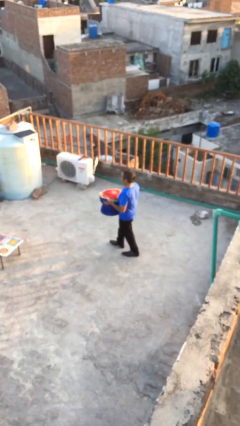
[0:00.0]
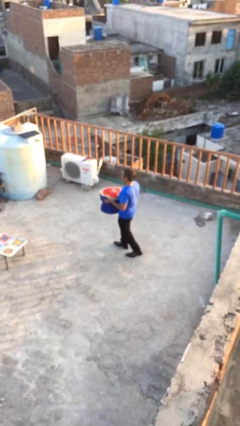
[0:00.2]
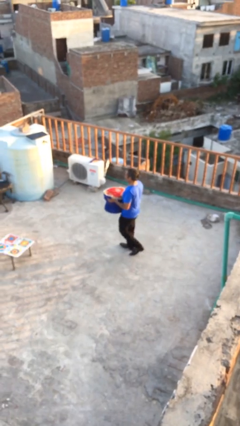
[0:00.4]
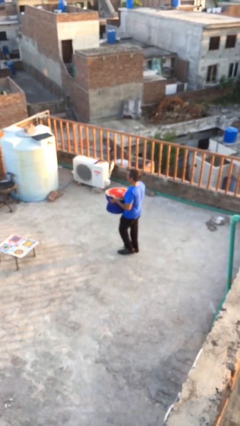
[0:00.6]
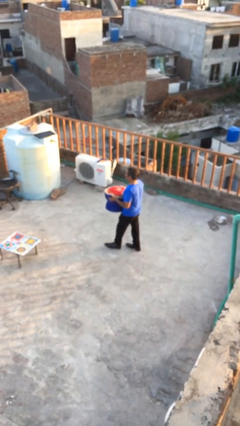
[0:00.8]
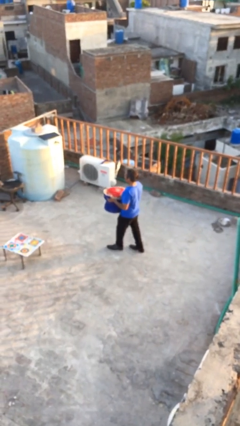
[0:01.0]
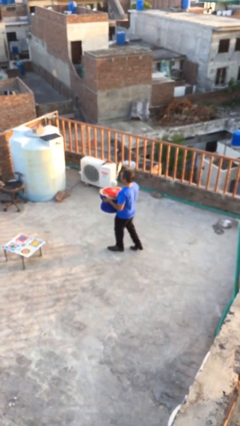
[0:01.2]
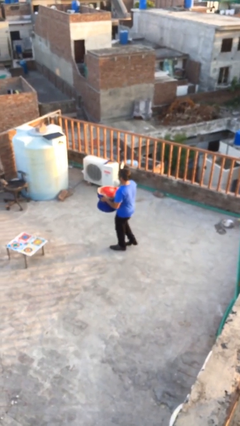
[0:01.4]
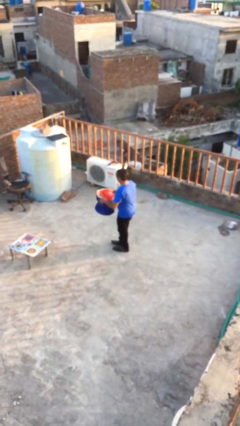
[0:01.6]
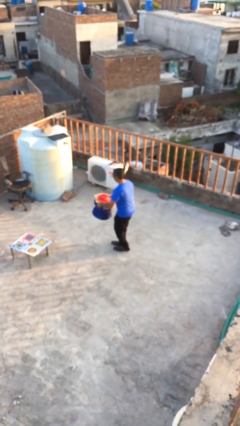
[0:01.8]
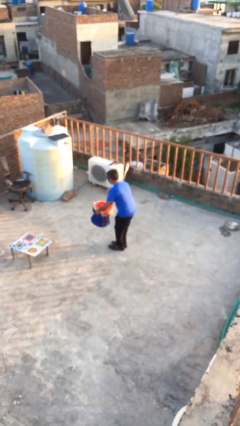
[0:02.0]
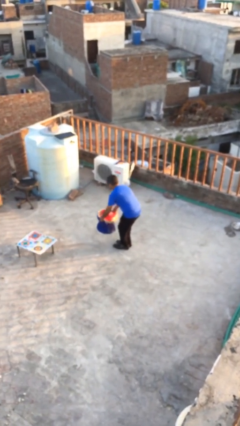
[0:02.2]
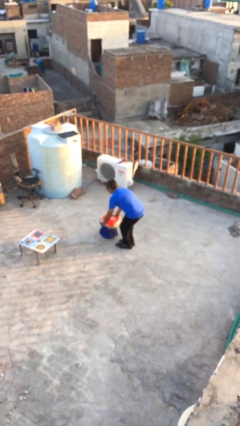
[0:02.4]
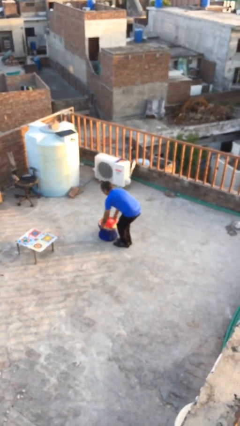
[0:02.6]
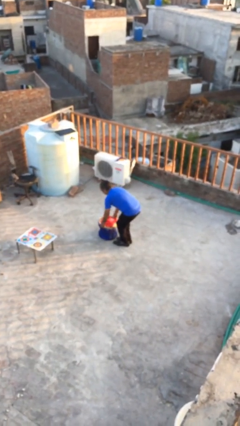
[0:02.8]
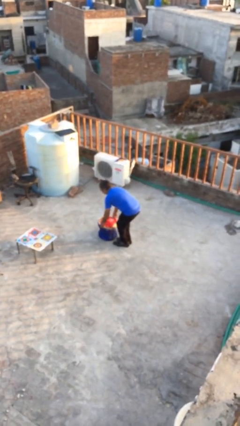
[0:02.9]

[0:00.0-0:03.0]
person puts down object on floor

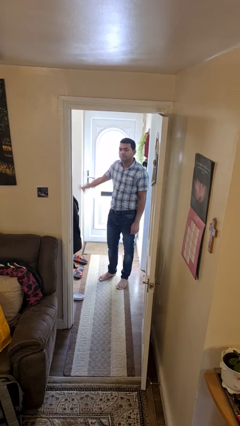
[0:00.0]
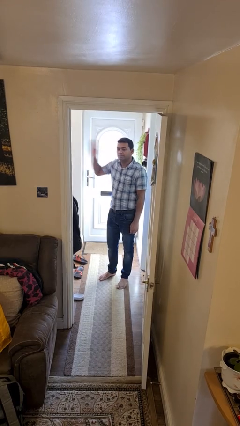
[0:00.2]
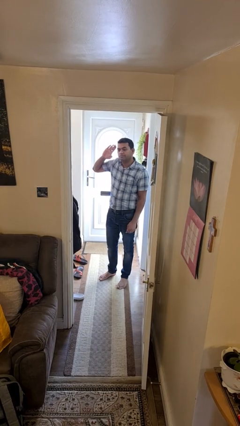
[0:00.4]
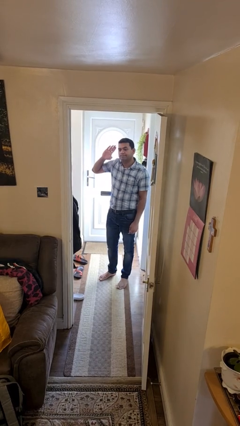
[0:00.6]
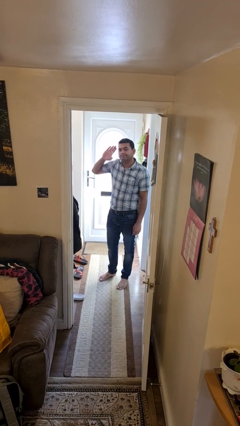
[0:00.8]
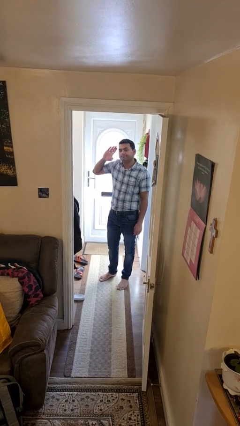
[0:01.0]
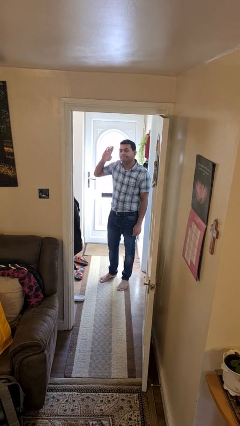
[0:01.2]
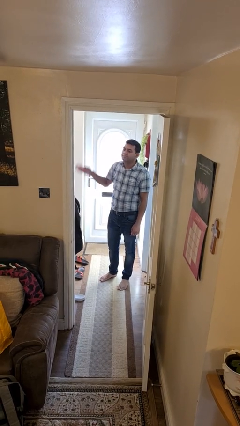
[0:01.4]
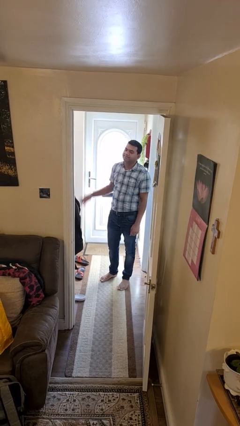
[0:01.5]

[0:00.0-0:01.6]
person salutes

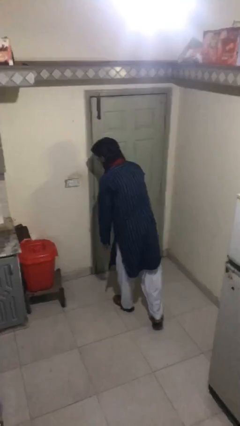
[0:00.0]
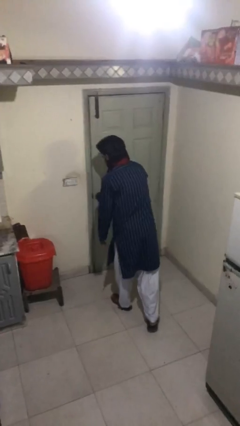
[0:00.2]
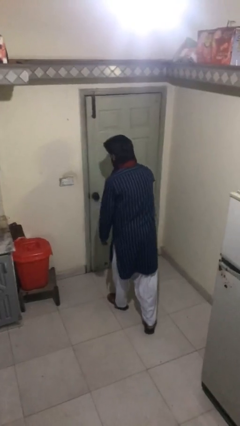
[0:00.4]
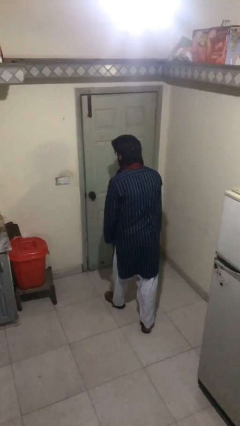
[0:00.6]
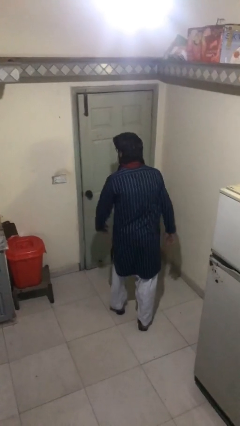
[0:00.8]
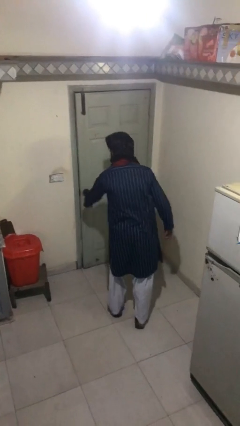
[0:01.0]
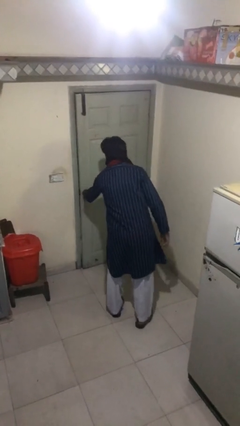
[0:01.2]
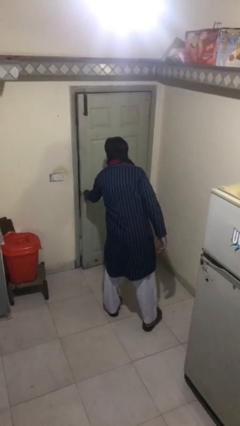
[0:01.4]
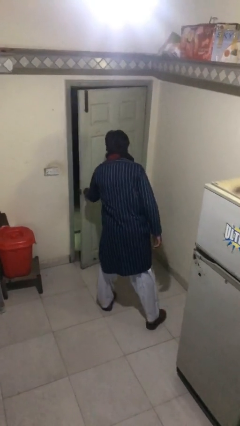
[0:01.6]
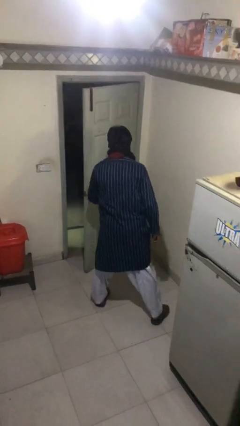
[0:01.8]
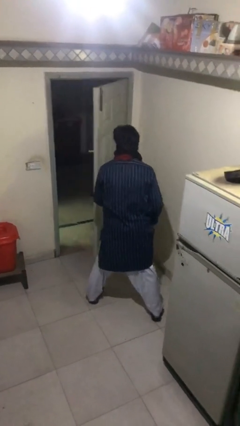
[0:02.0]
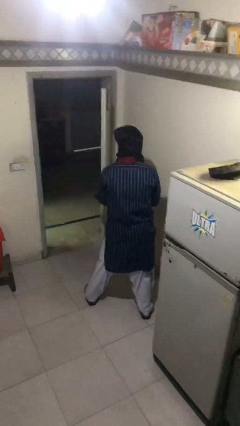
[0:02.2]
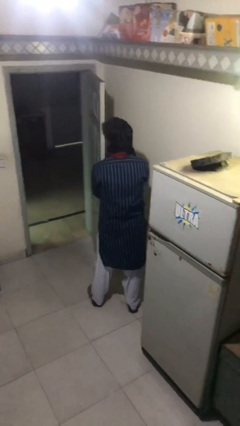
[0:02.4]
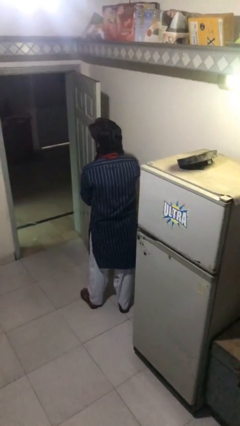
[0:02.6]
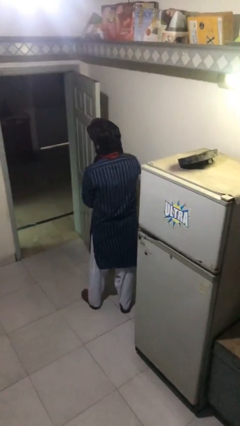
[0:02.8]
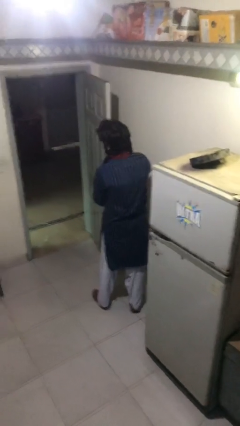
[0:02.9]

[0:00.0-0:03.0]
person opens facility door

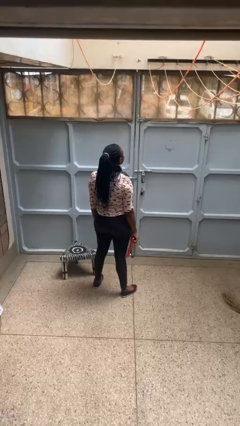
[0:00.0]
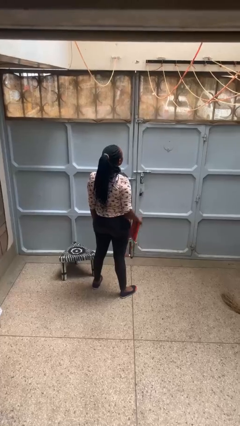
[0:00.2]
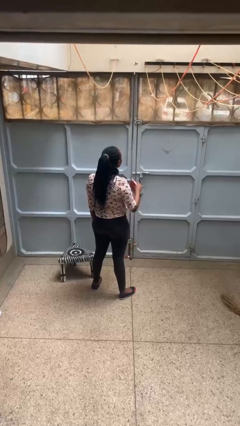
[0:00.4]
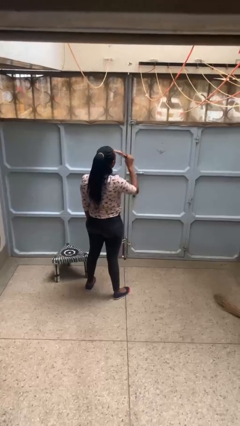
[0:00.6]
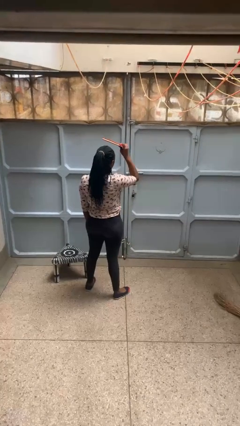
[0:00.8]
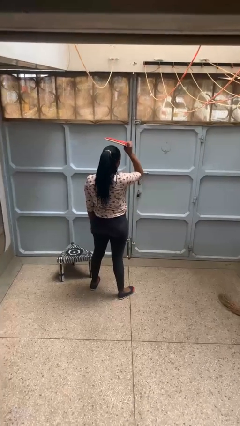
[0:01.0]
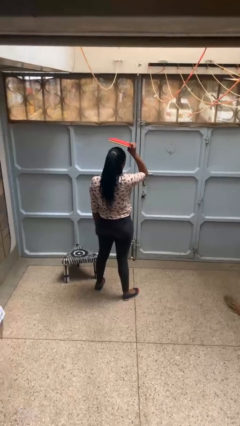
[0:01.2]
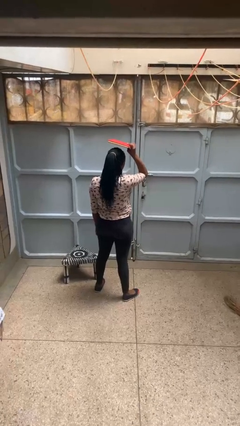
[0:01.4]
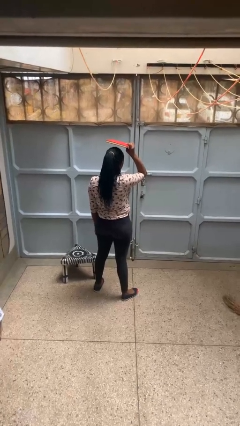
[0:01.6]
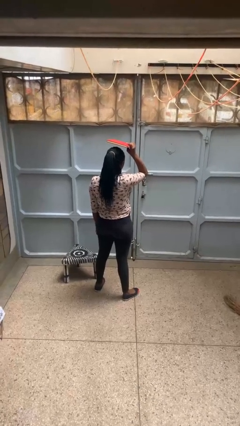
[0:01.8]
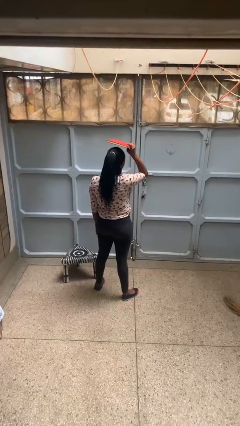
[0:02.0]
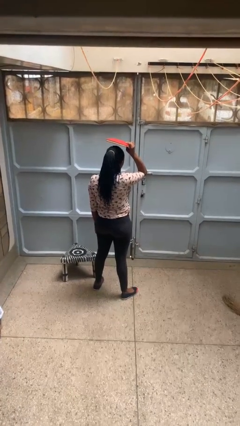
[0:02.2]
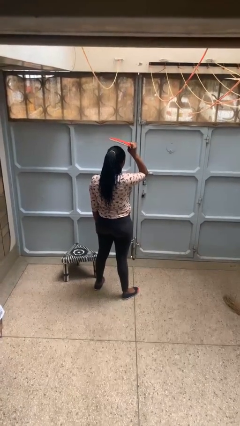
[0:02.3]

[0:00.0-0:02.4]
person holds object above head

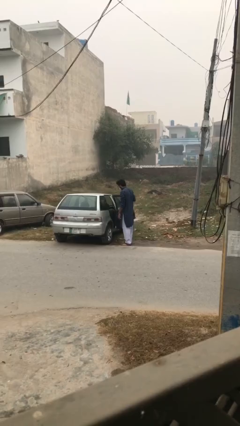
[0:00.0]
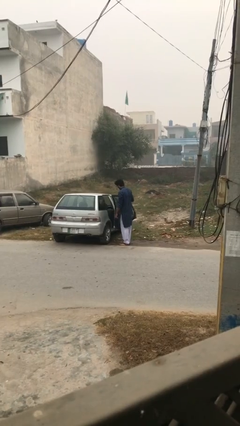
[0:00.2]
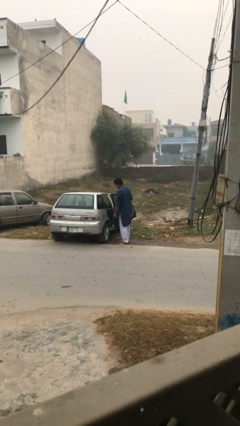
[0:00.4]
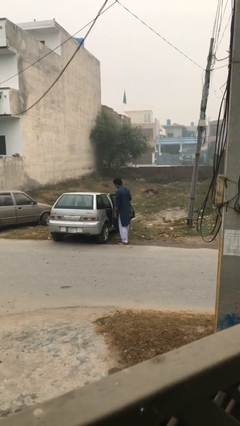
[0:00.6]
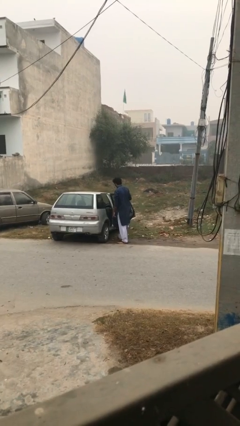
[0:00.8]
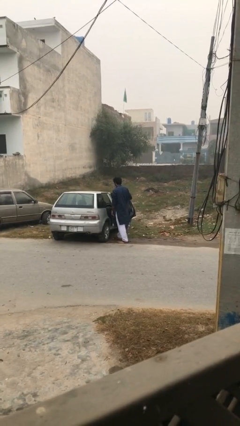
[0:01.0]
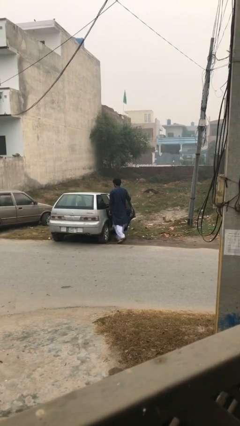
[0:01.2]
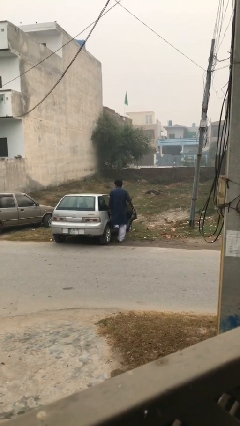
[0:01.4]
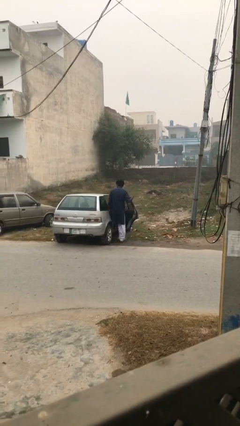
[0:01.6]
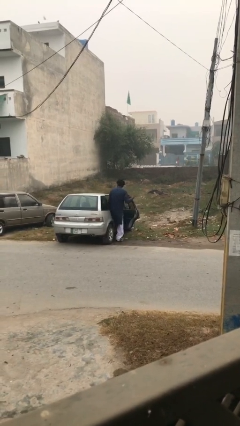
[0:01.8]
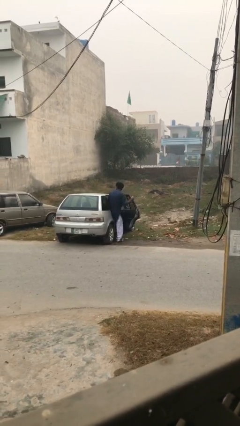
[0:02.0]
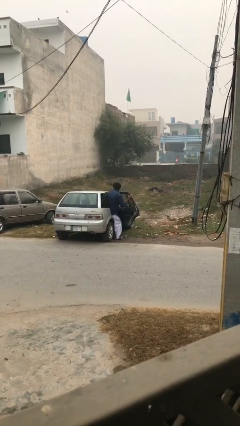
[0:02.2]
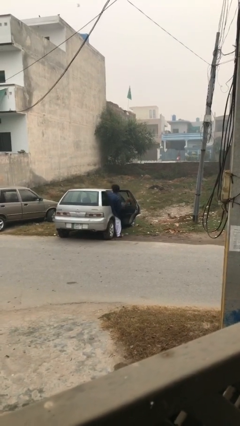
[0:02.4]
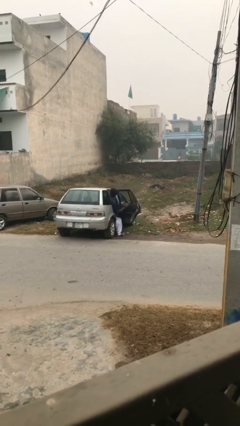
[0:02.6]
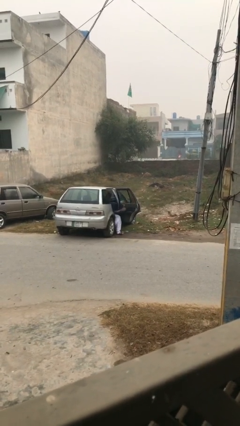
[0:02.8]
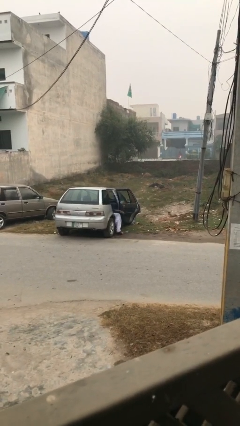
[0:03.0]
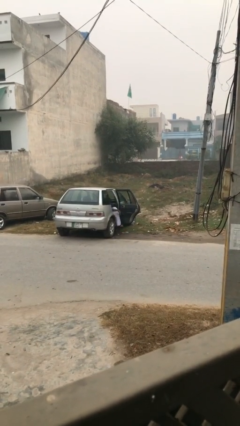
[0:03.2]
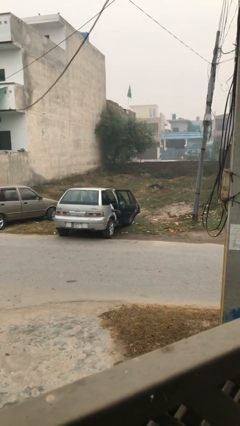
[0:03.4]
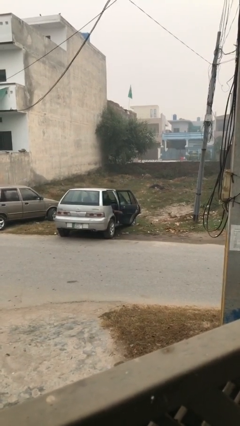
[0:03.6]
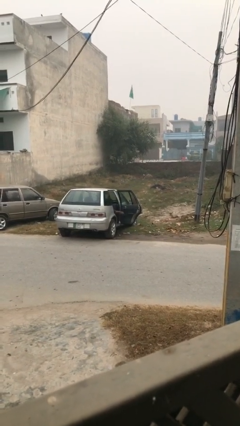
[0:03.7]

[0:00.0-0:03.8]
person enters car

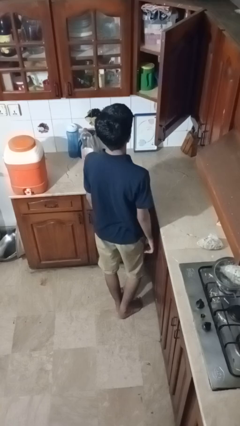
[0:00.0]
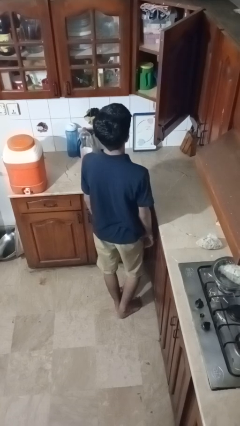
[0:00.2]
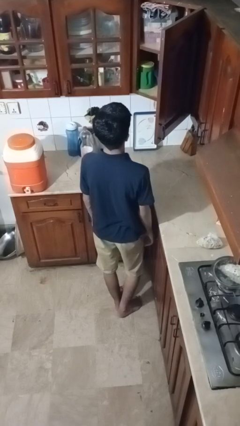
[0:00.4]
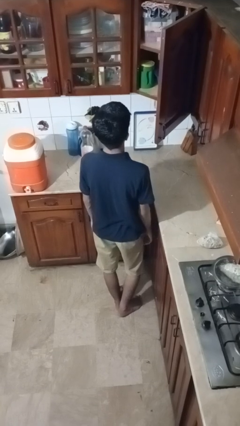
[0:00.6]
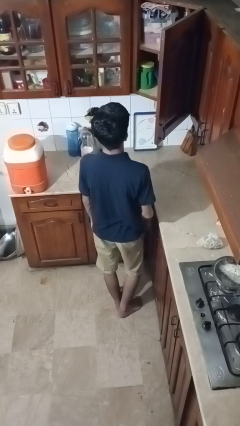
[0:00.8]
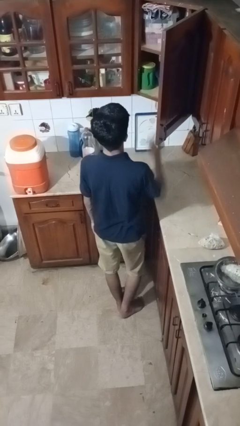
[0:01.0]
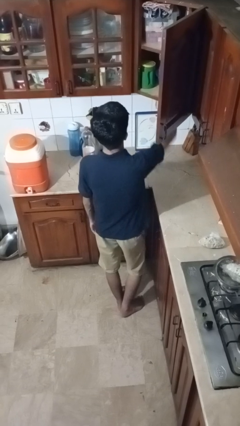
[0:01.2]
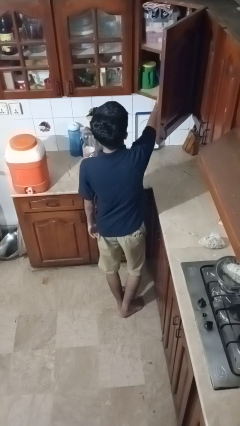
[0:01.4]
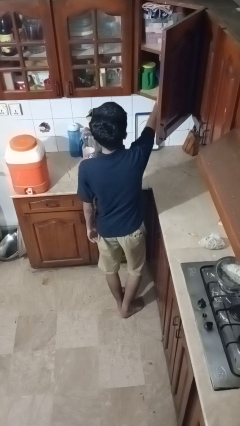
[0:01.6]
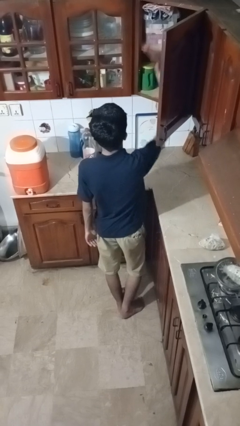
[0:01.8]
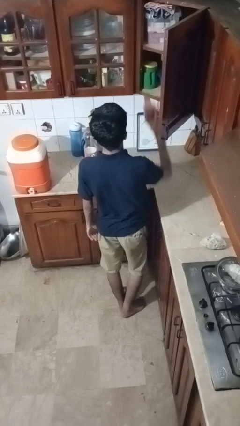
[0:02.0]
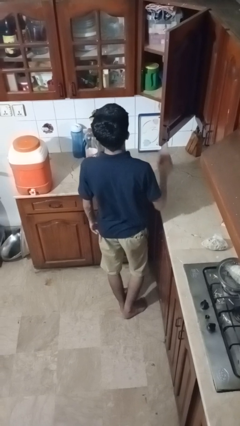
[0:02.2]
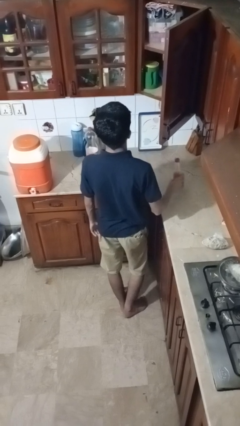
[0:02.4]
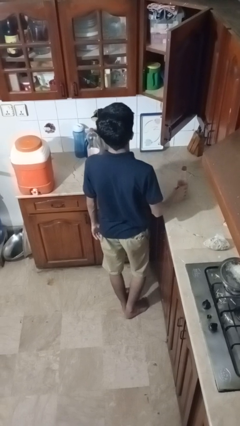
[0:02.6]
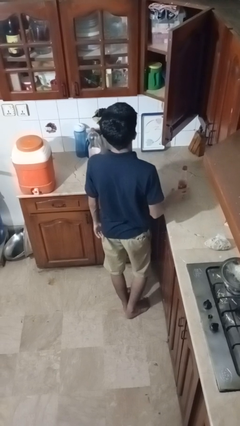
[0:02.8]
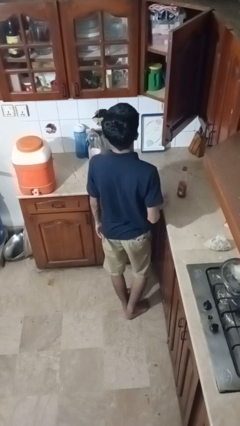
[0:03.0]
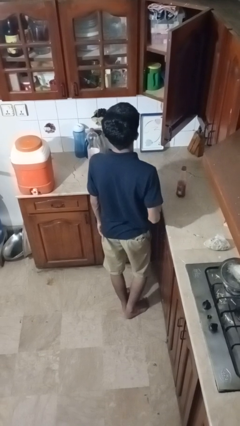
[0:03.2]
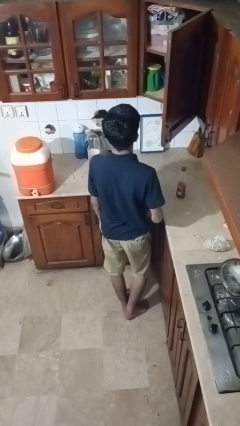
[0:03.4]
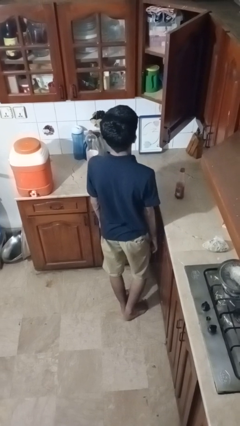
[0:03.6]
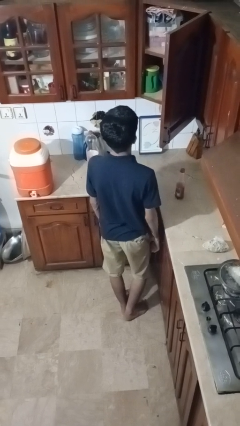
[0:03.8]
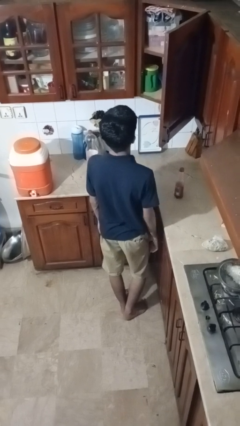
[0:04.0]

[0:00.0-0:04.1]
person takes object from cabinet
